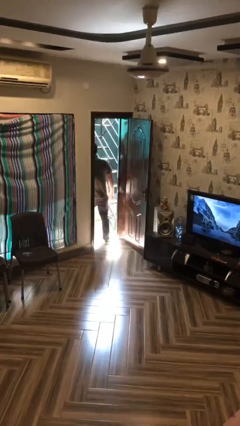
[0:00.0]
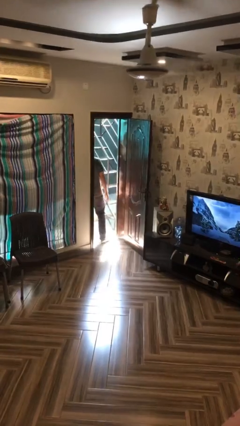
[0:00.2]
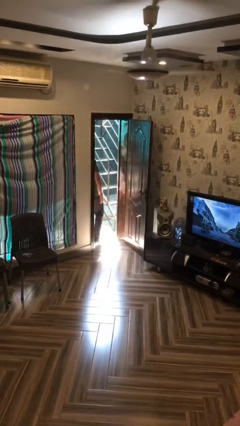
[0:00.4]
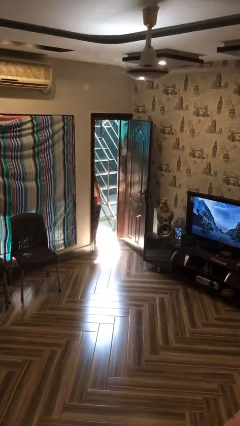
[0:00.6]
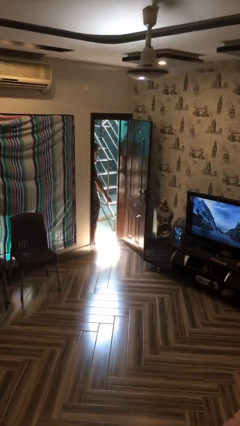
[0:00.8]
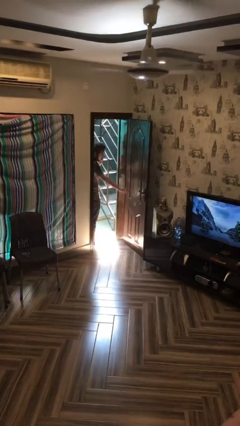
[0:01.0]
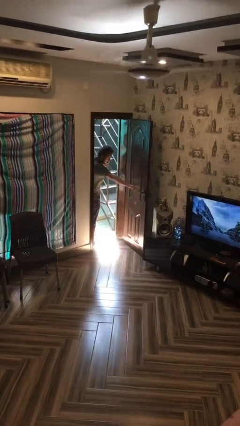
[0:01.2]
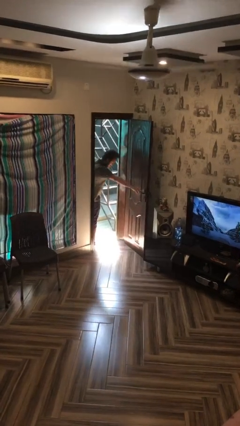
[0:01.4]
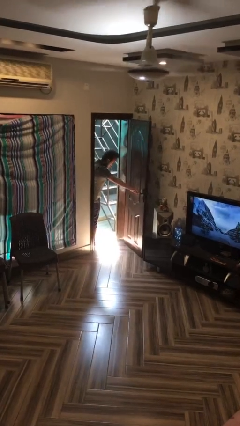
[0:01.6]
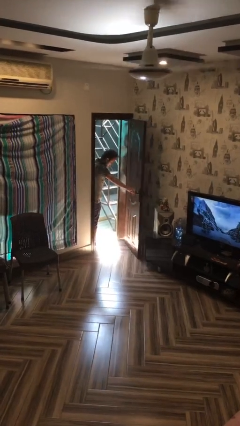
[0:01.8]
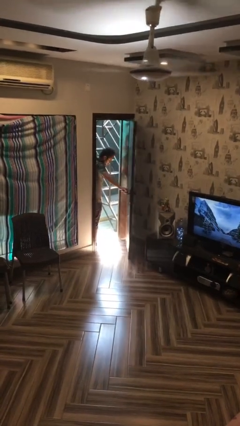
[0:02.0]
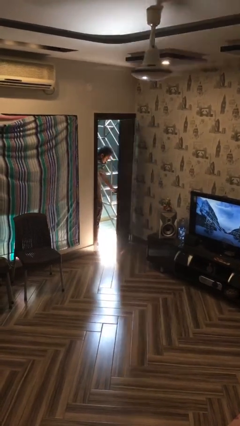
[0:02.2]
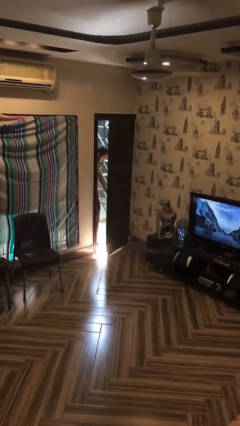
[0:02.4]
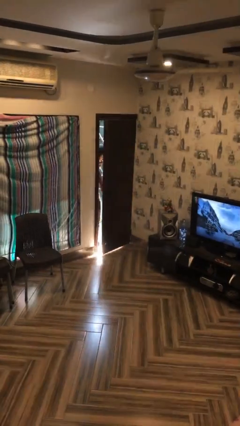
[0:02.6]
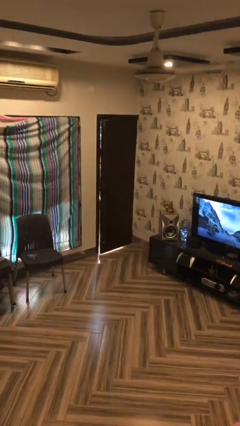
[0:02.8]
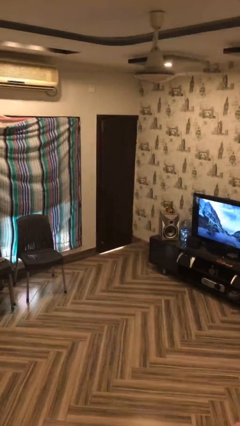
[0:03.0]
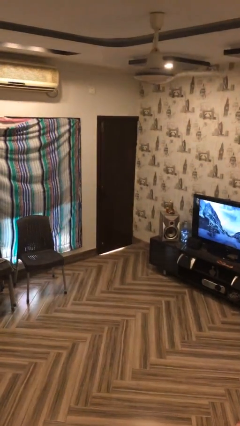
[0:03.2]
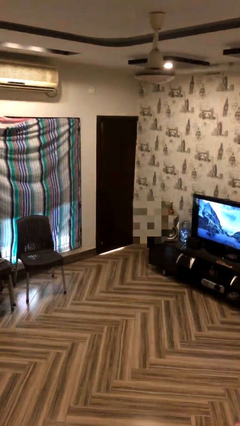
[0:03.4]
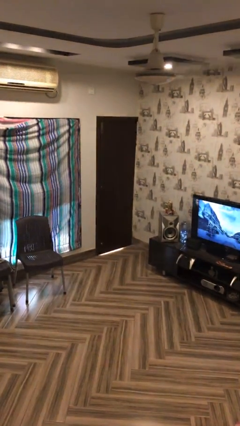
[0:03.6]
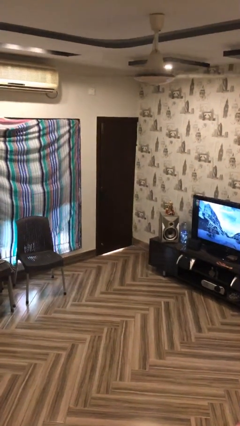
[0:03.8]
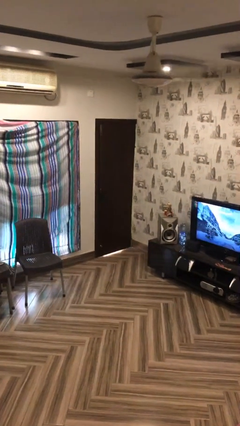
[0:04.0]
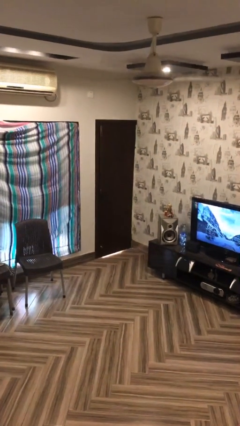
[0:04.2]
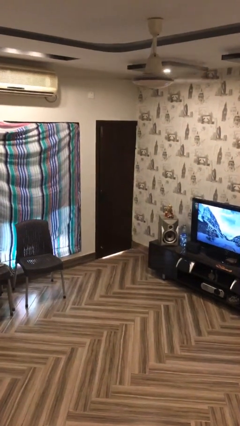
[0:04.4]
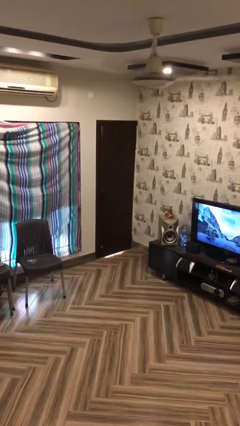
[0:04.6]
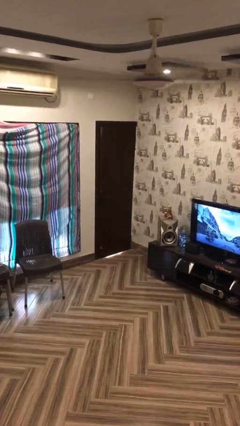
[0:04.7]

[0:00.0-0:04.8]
person closes facility door

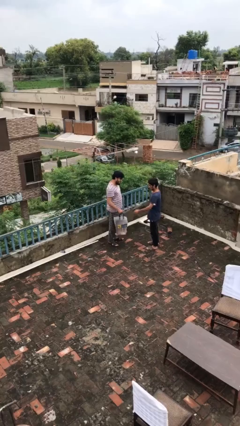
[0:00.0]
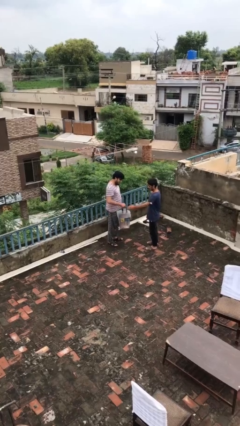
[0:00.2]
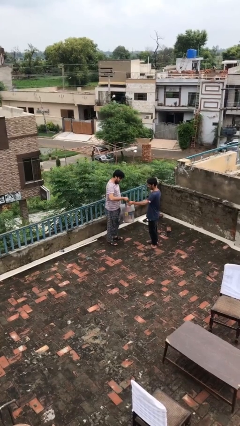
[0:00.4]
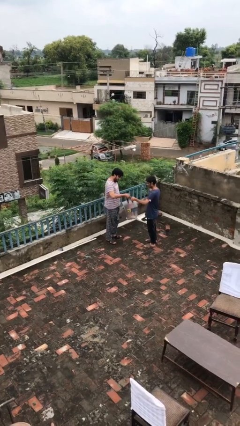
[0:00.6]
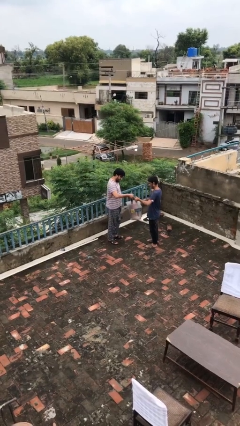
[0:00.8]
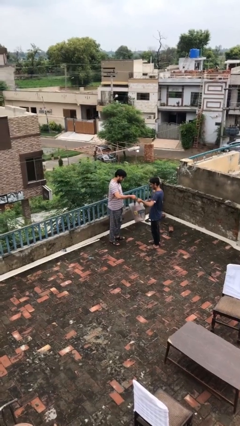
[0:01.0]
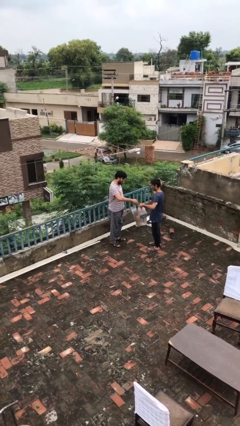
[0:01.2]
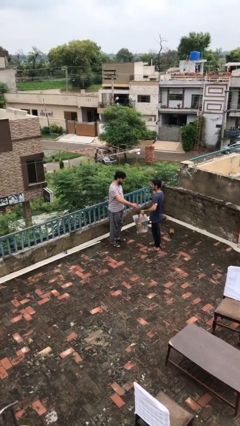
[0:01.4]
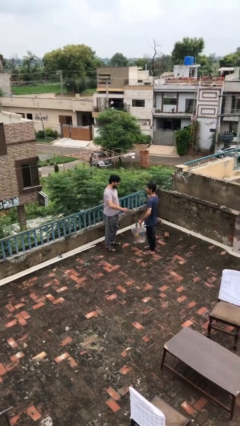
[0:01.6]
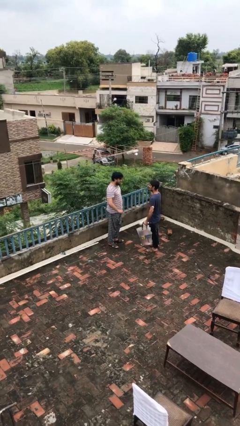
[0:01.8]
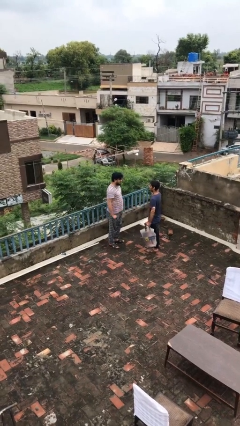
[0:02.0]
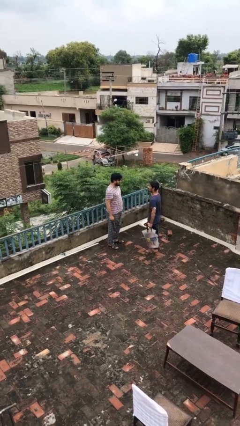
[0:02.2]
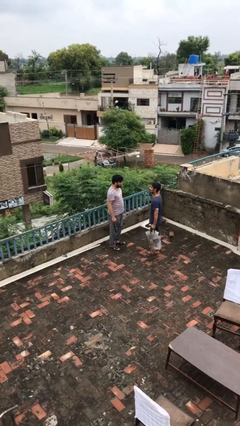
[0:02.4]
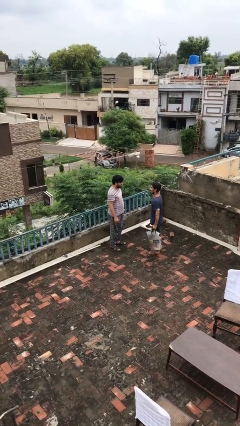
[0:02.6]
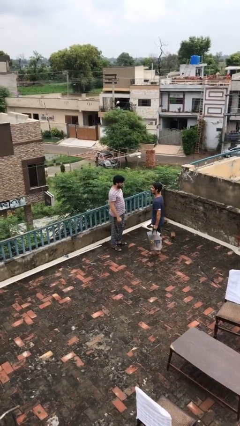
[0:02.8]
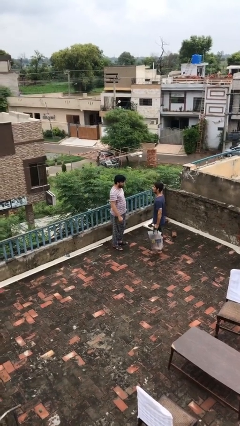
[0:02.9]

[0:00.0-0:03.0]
person transfers object to person

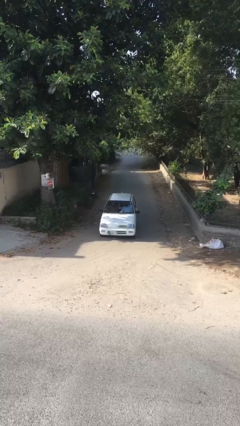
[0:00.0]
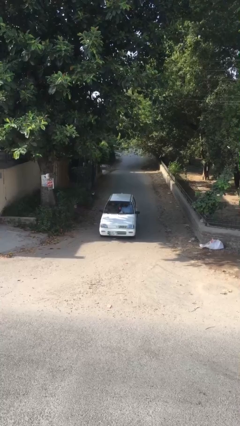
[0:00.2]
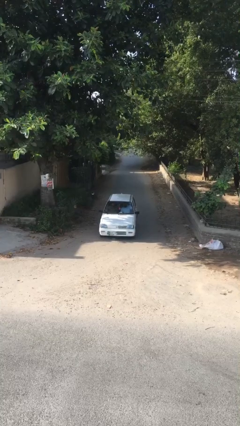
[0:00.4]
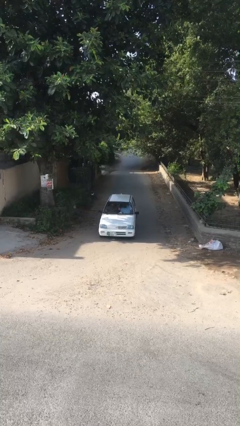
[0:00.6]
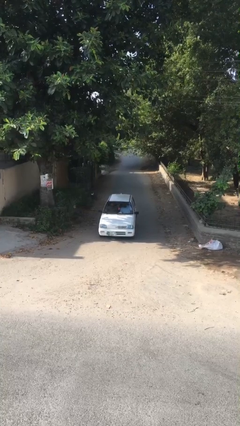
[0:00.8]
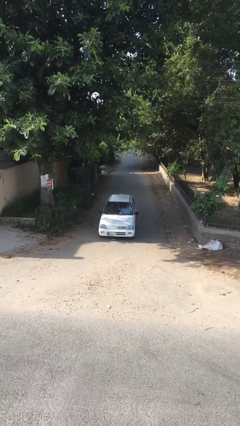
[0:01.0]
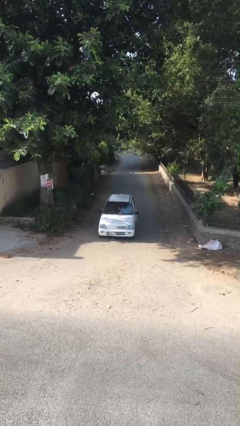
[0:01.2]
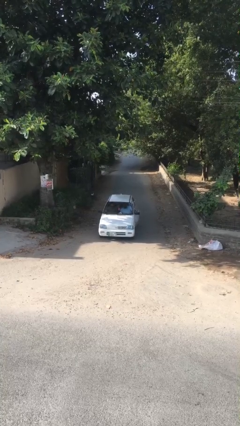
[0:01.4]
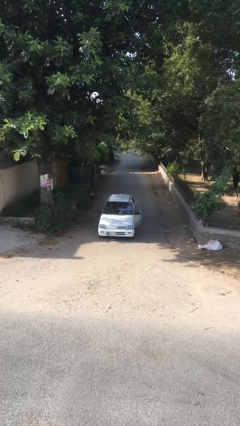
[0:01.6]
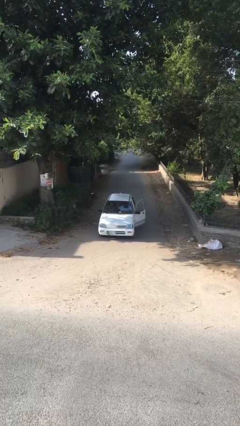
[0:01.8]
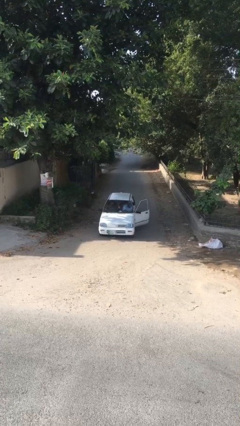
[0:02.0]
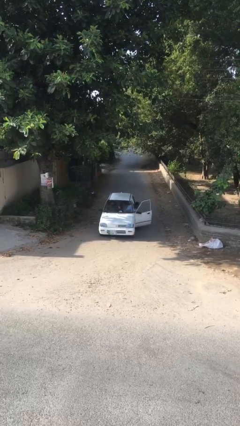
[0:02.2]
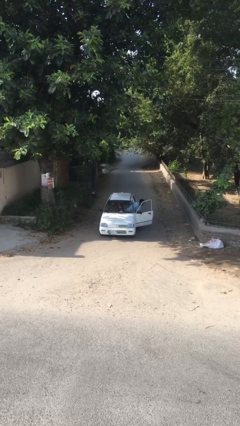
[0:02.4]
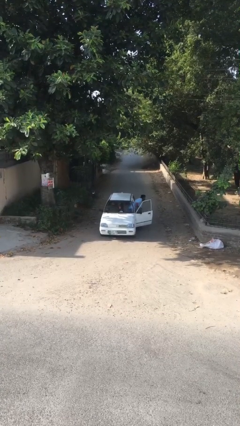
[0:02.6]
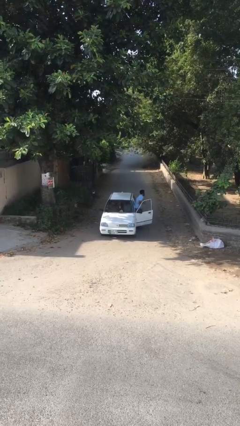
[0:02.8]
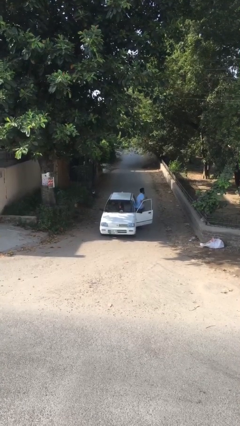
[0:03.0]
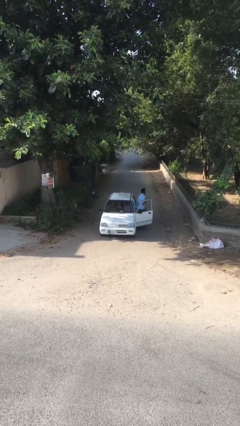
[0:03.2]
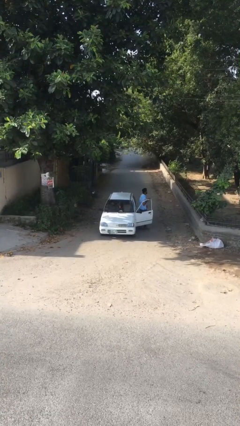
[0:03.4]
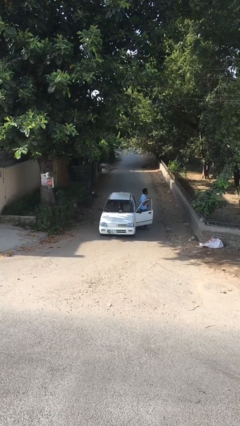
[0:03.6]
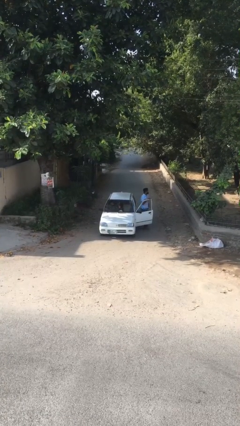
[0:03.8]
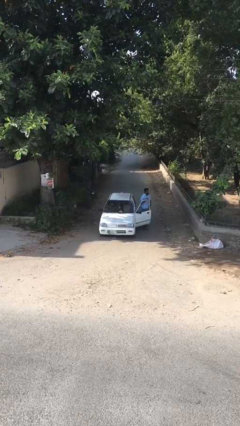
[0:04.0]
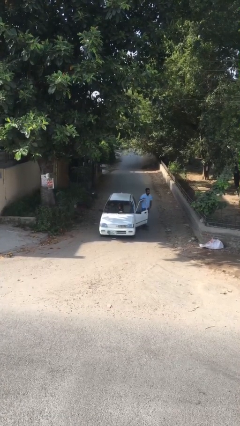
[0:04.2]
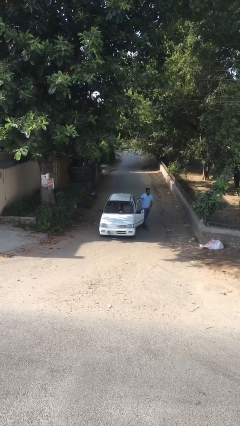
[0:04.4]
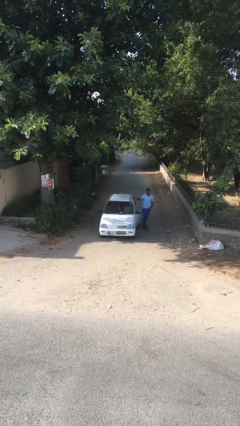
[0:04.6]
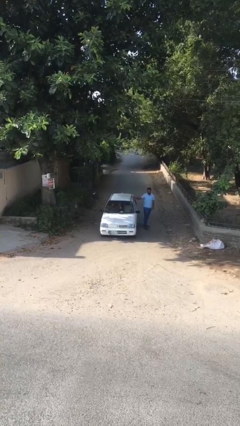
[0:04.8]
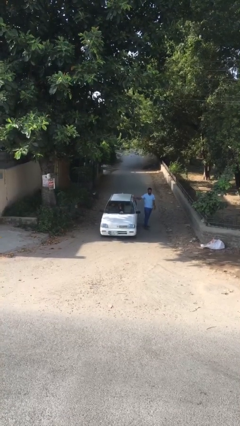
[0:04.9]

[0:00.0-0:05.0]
car drops off person

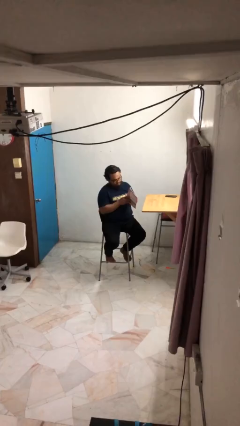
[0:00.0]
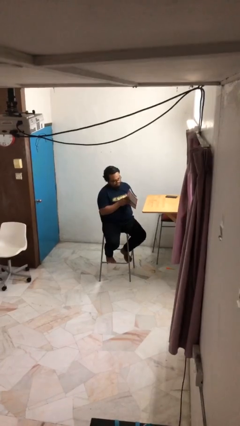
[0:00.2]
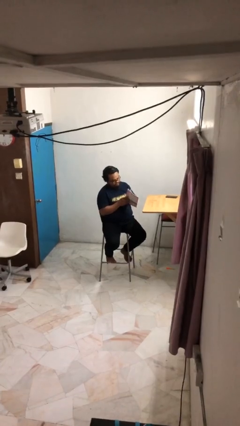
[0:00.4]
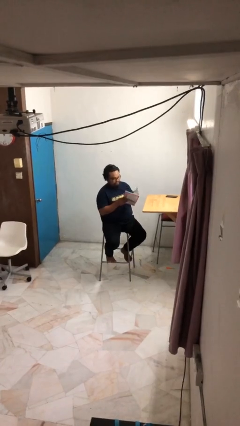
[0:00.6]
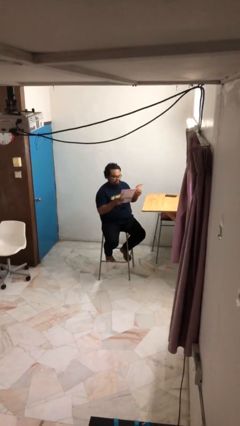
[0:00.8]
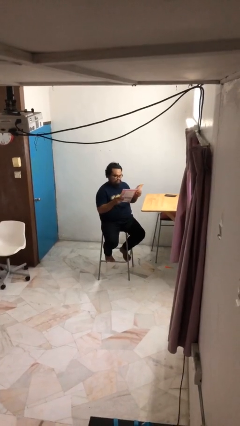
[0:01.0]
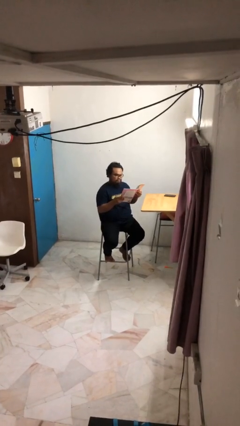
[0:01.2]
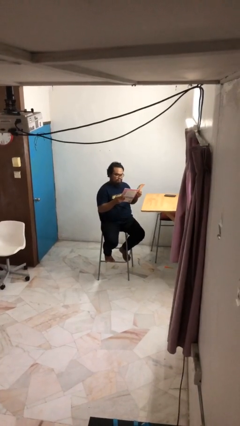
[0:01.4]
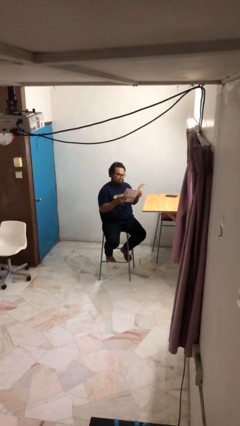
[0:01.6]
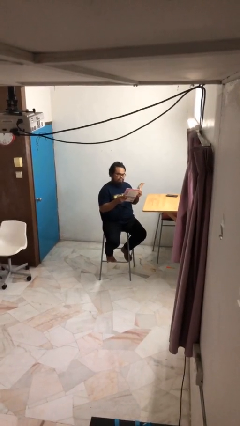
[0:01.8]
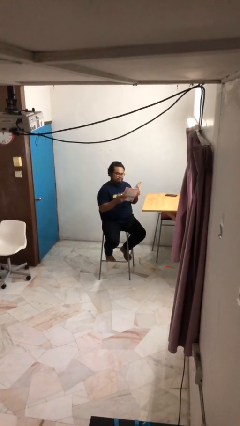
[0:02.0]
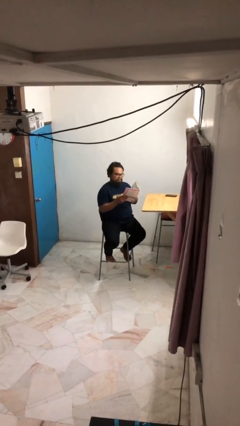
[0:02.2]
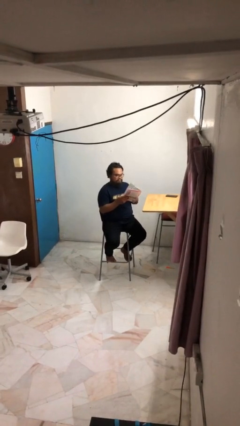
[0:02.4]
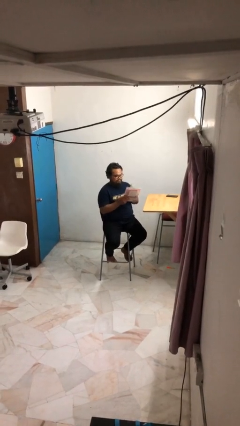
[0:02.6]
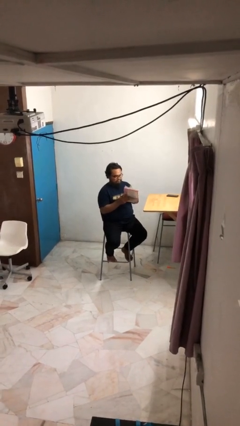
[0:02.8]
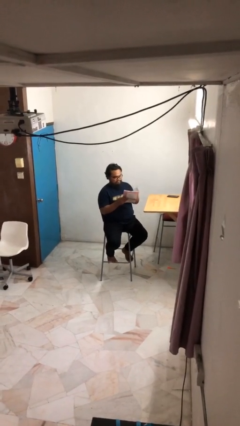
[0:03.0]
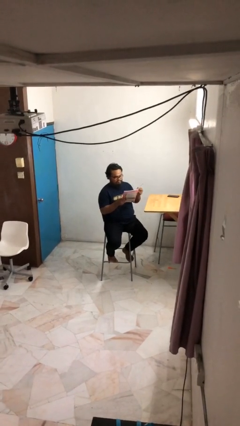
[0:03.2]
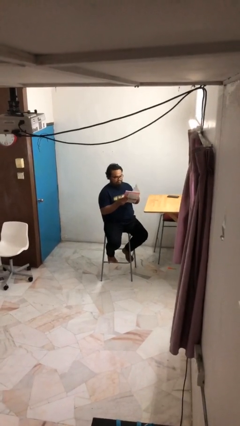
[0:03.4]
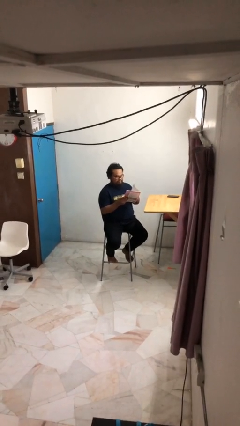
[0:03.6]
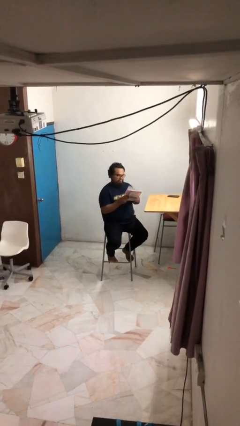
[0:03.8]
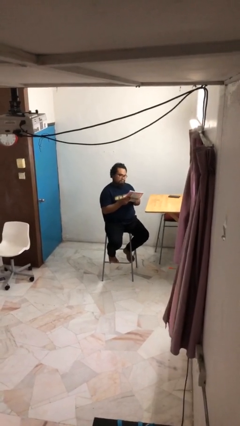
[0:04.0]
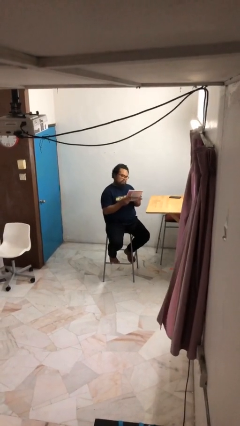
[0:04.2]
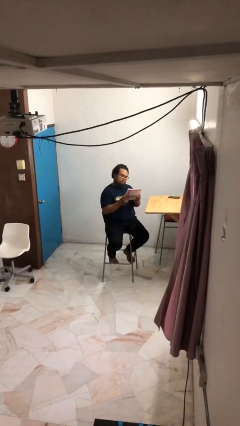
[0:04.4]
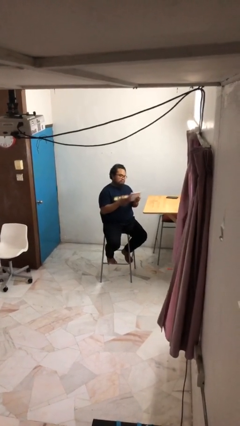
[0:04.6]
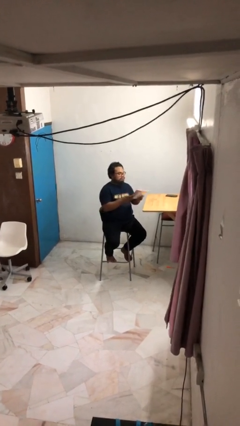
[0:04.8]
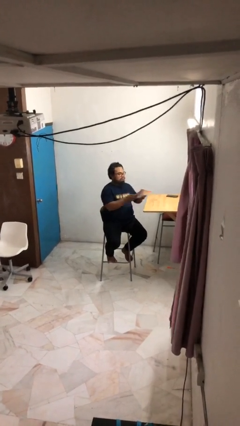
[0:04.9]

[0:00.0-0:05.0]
person reads document
